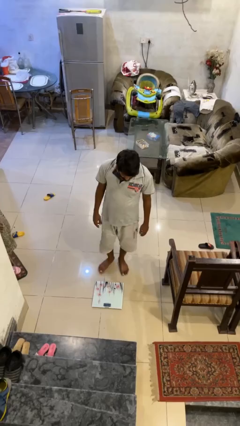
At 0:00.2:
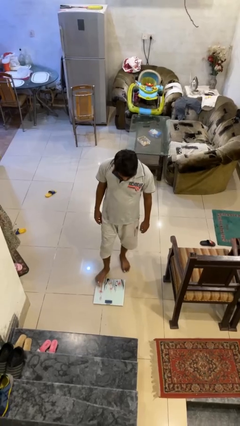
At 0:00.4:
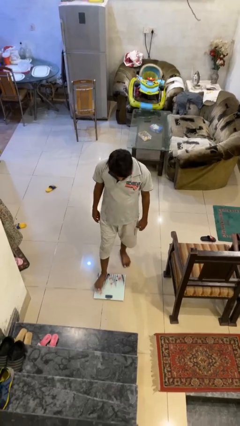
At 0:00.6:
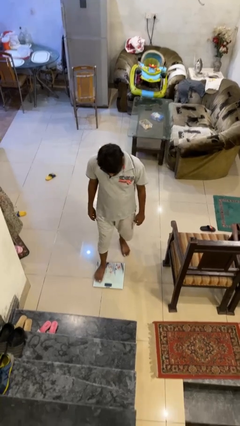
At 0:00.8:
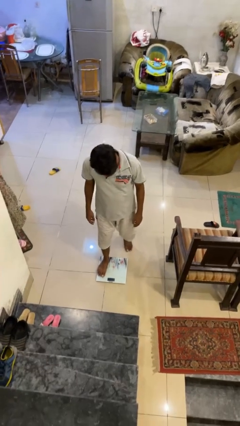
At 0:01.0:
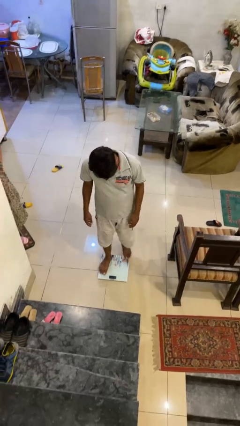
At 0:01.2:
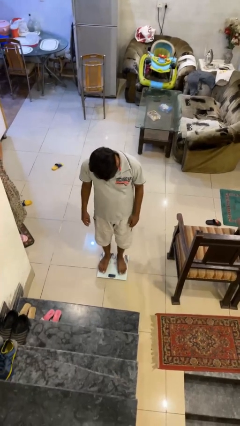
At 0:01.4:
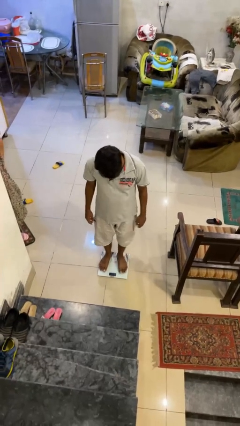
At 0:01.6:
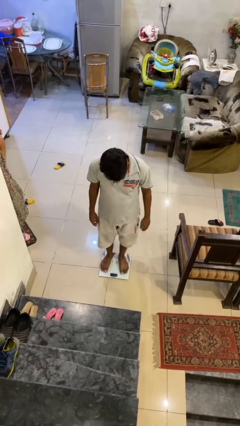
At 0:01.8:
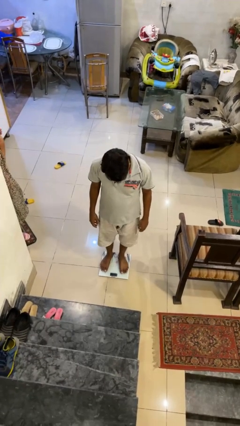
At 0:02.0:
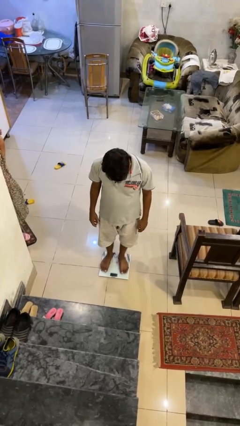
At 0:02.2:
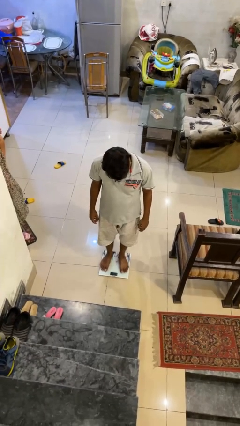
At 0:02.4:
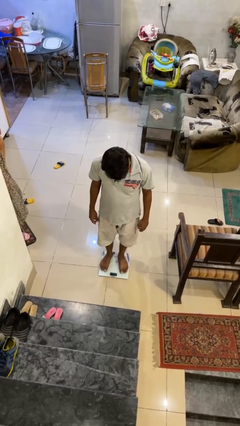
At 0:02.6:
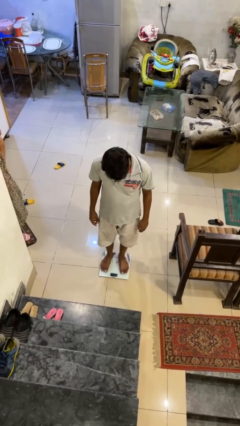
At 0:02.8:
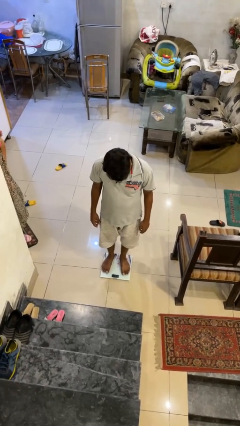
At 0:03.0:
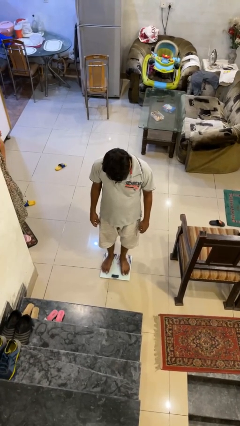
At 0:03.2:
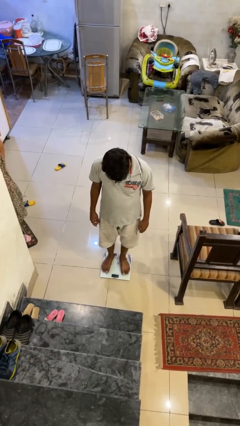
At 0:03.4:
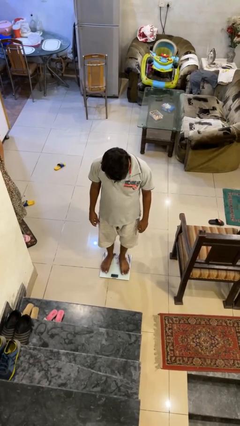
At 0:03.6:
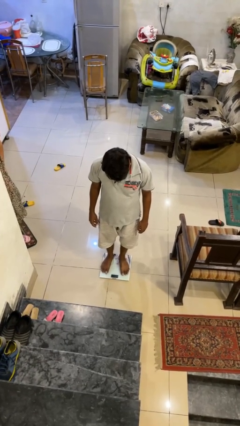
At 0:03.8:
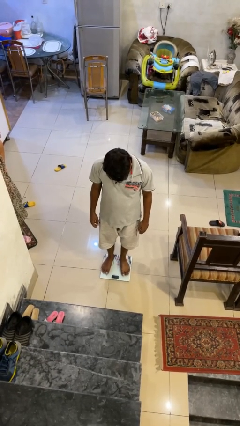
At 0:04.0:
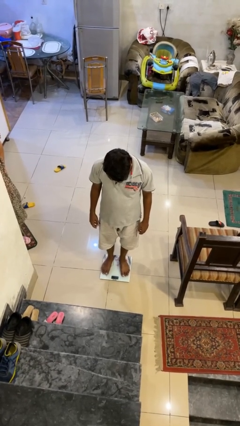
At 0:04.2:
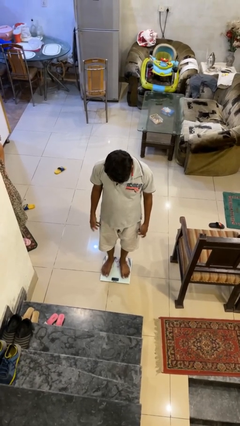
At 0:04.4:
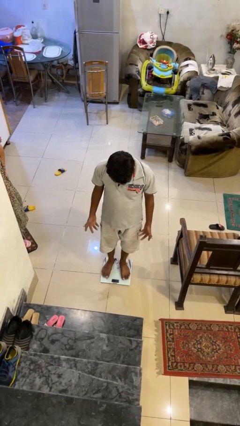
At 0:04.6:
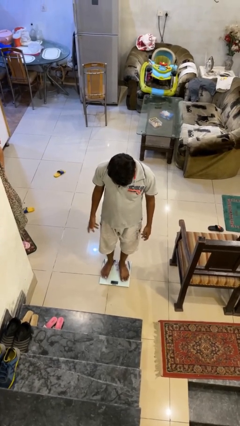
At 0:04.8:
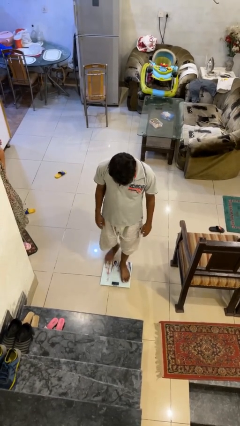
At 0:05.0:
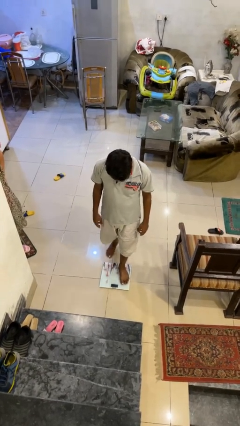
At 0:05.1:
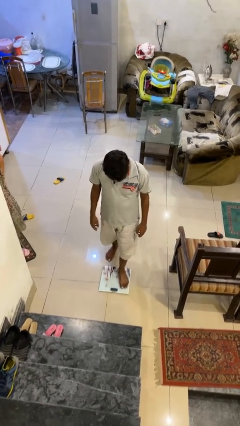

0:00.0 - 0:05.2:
person uses bodyweight scale

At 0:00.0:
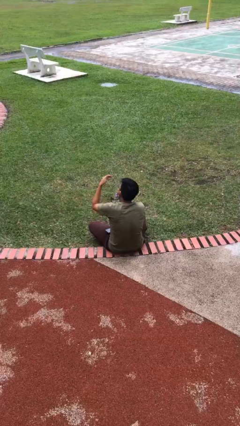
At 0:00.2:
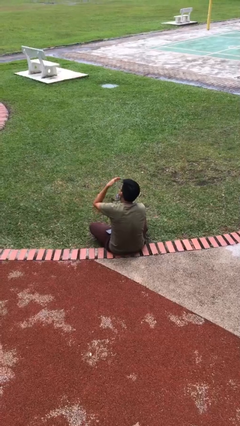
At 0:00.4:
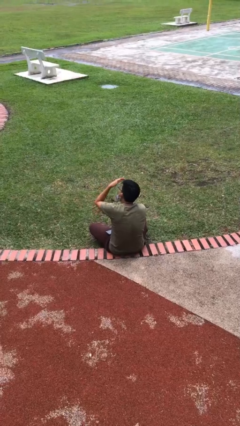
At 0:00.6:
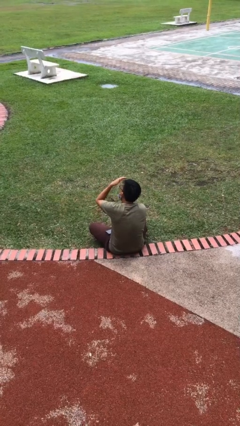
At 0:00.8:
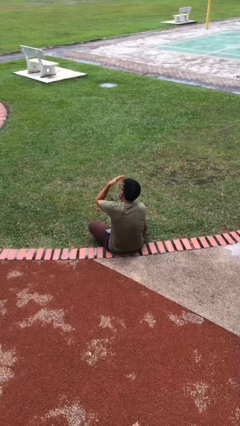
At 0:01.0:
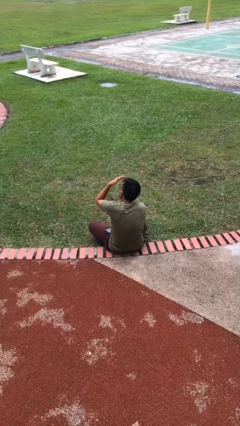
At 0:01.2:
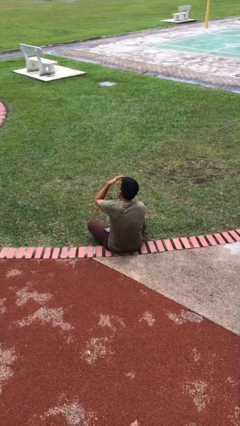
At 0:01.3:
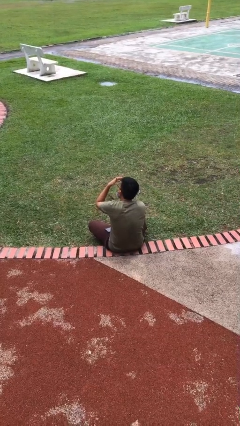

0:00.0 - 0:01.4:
person shades eyes

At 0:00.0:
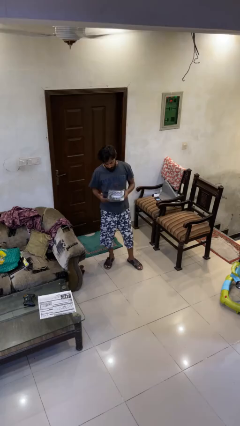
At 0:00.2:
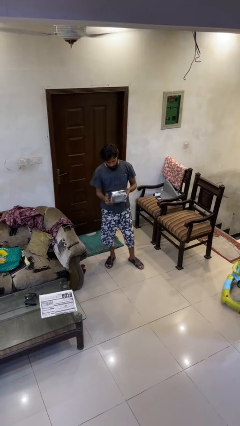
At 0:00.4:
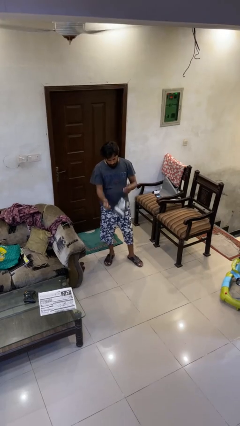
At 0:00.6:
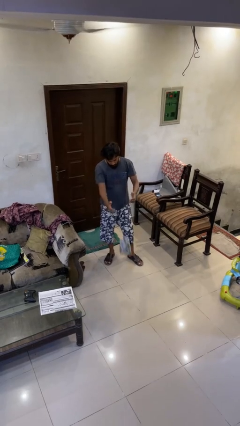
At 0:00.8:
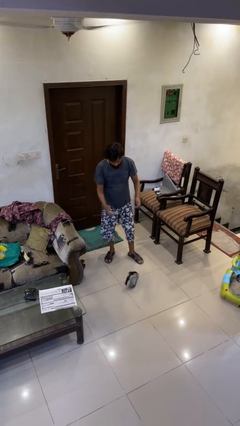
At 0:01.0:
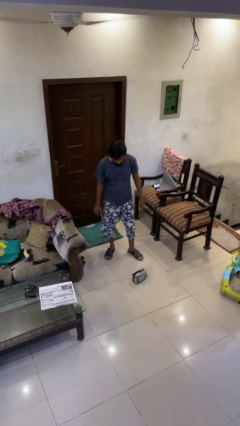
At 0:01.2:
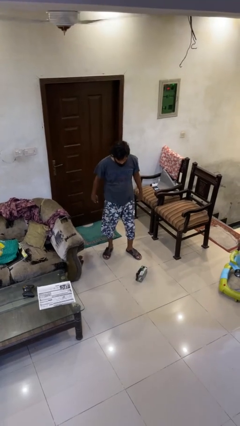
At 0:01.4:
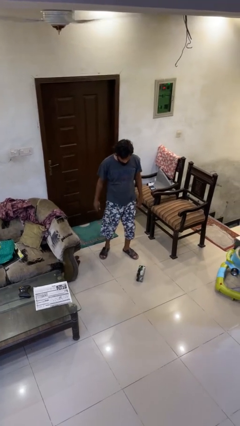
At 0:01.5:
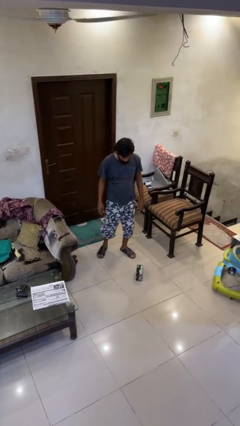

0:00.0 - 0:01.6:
person drops object

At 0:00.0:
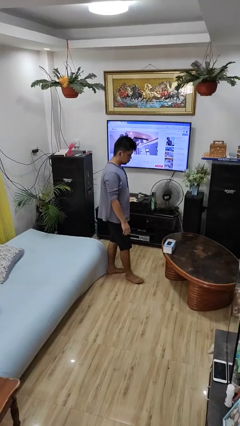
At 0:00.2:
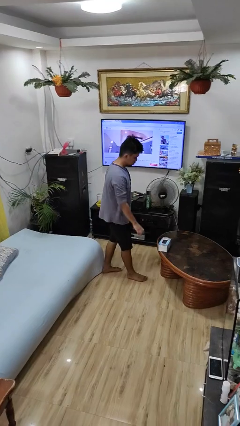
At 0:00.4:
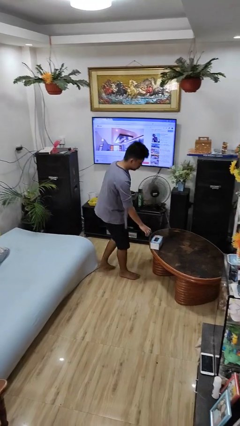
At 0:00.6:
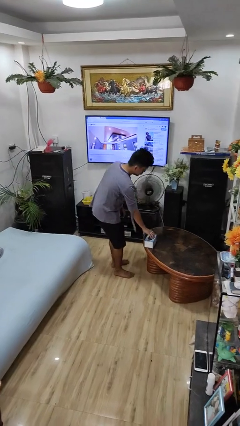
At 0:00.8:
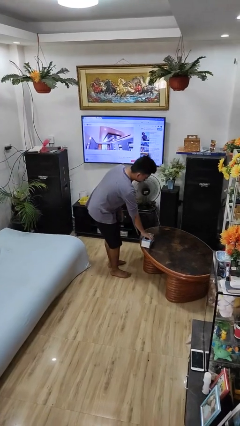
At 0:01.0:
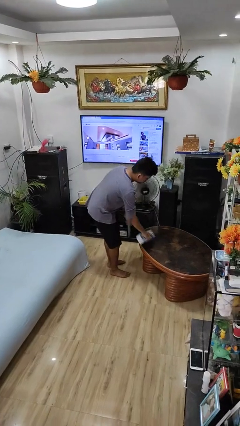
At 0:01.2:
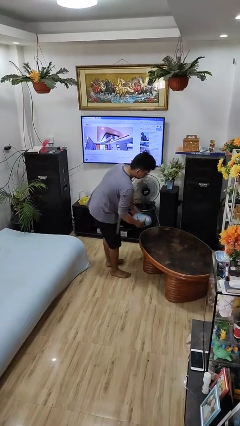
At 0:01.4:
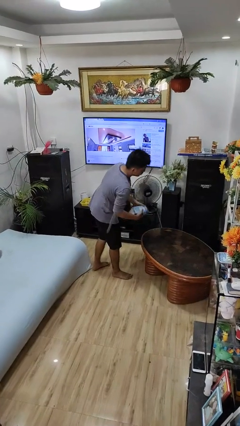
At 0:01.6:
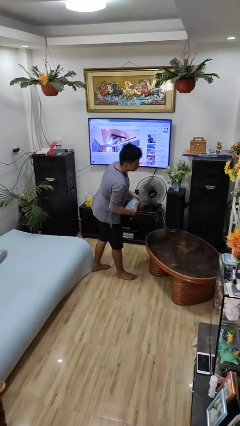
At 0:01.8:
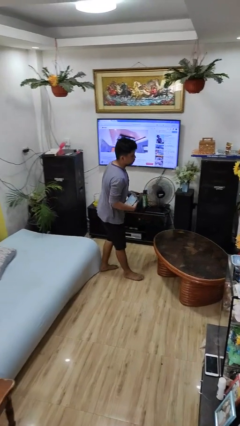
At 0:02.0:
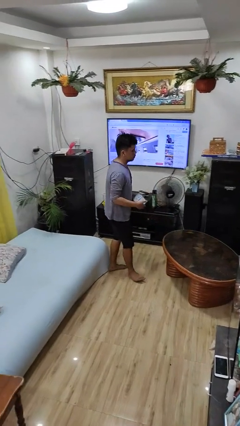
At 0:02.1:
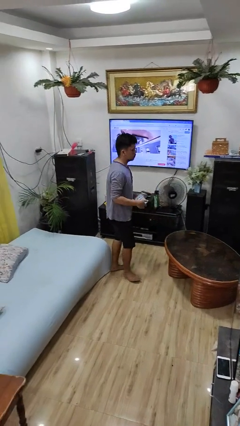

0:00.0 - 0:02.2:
person picks up object from table

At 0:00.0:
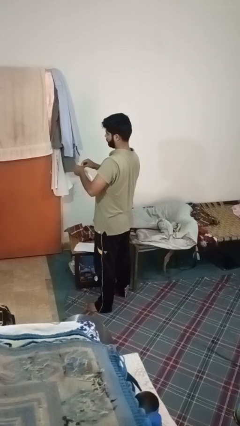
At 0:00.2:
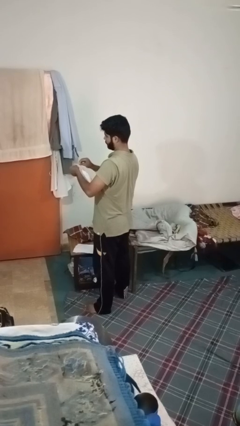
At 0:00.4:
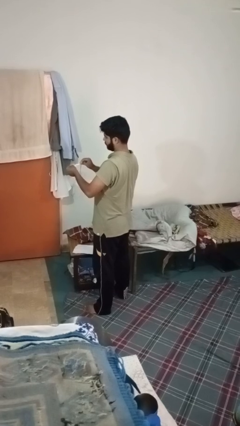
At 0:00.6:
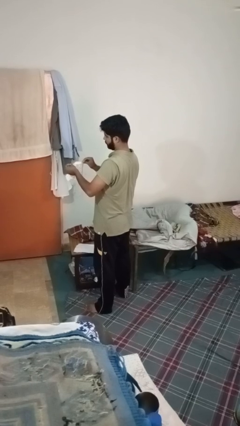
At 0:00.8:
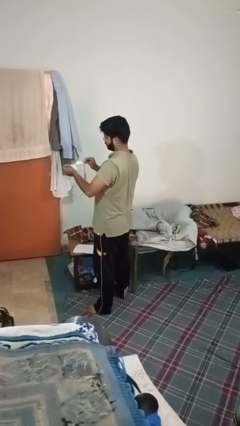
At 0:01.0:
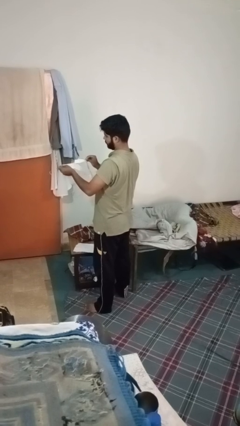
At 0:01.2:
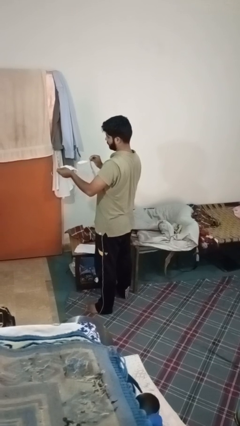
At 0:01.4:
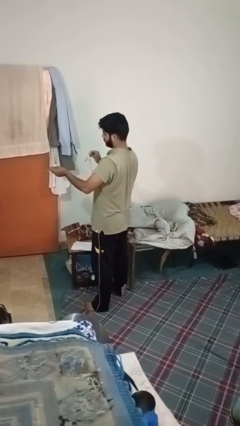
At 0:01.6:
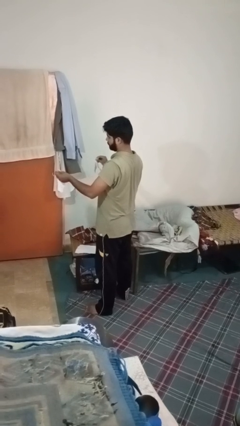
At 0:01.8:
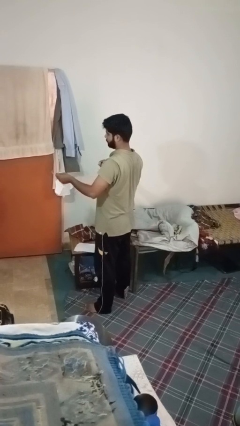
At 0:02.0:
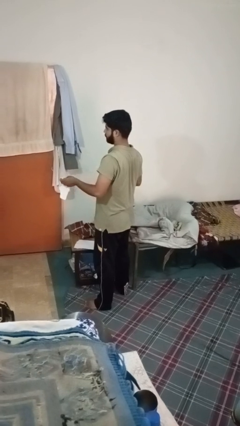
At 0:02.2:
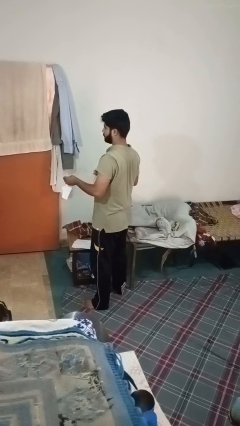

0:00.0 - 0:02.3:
person tears paper

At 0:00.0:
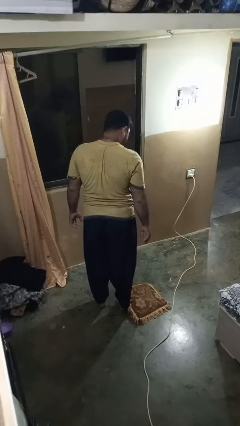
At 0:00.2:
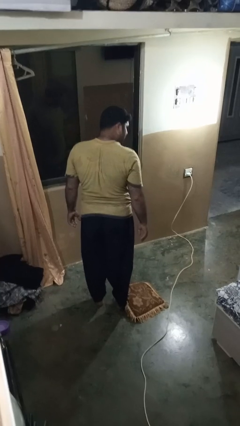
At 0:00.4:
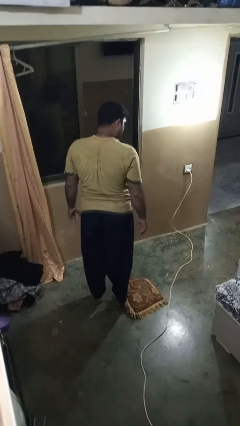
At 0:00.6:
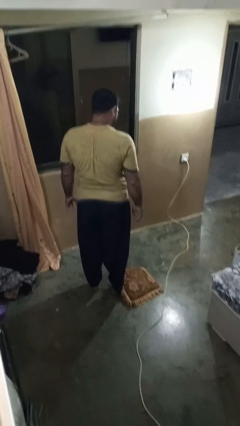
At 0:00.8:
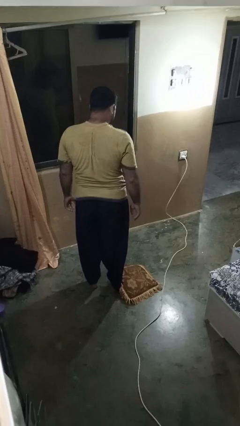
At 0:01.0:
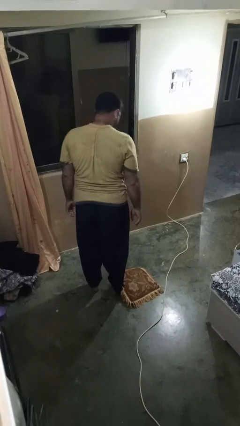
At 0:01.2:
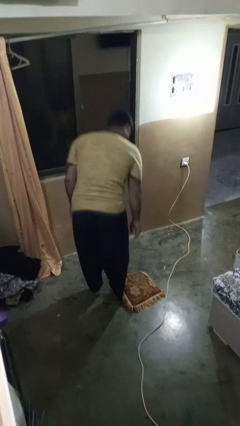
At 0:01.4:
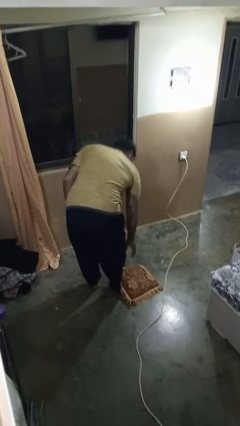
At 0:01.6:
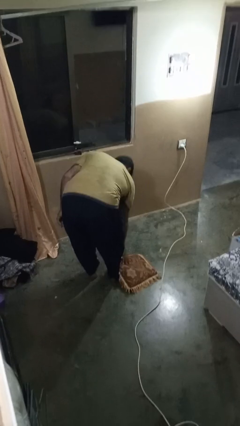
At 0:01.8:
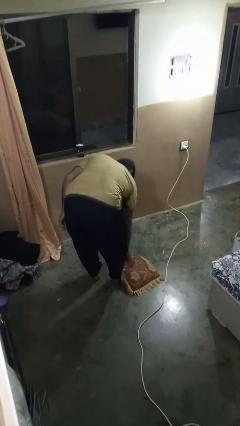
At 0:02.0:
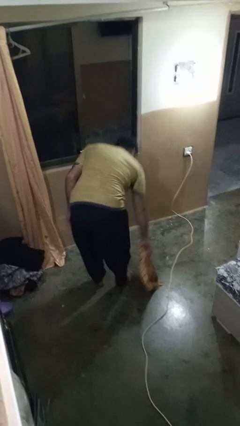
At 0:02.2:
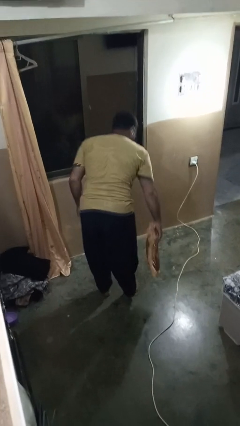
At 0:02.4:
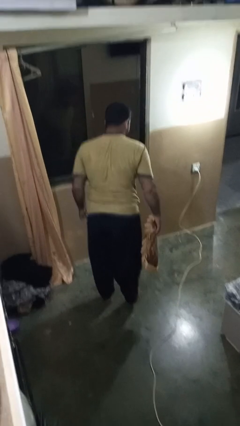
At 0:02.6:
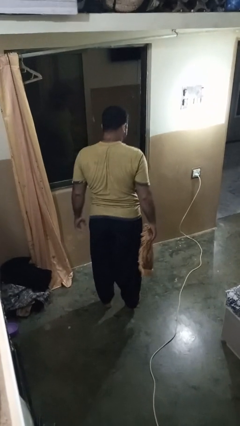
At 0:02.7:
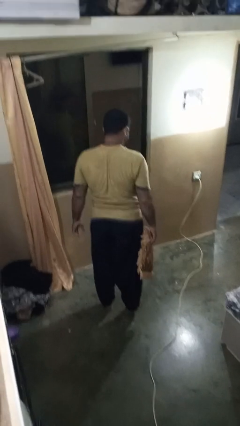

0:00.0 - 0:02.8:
person picks up object from floor

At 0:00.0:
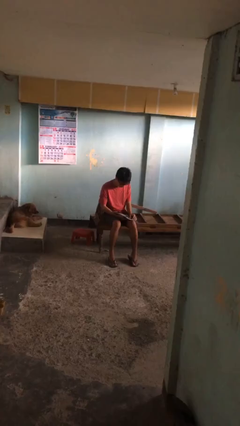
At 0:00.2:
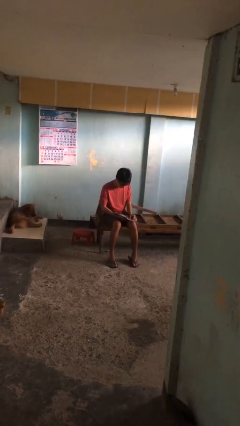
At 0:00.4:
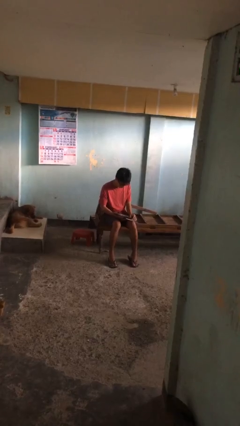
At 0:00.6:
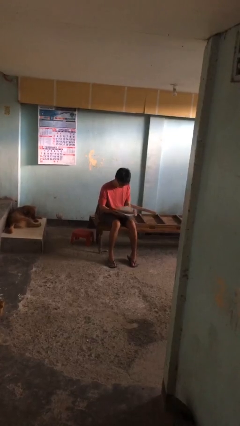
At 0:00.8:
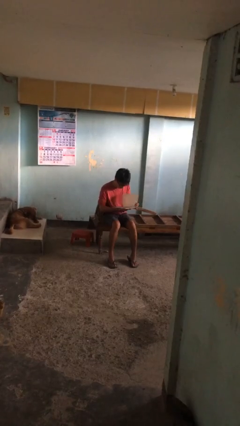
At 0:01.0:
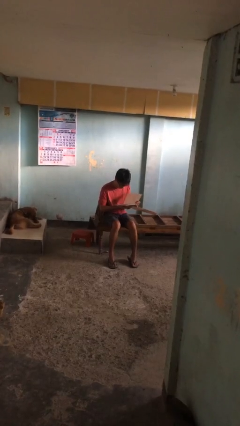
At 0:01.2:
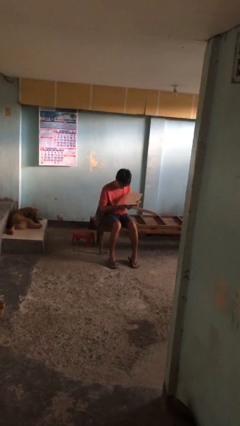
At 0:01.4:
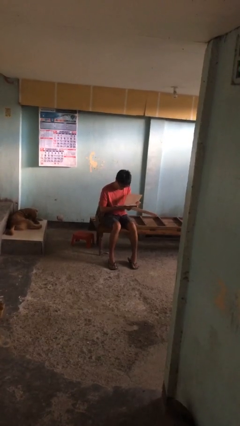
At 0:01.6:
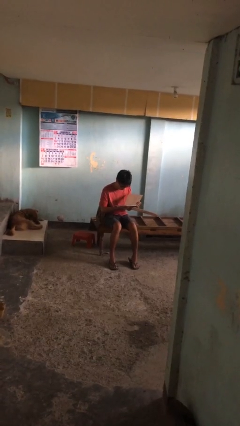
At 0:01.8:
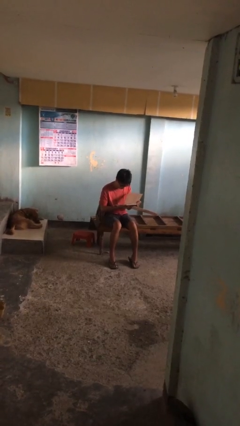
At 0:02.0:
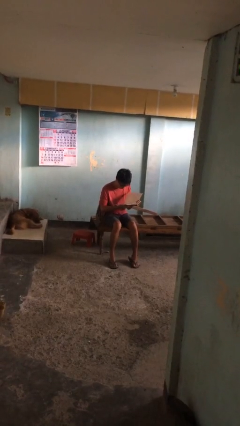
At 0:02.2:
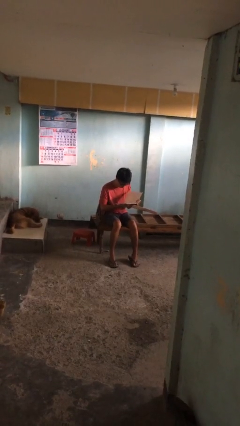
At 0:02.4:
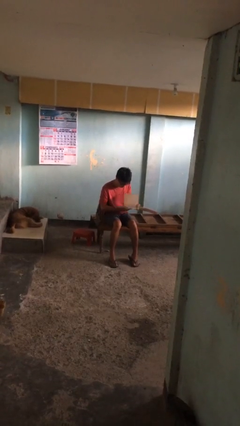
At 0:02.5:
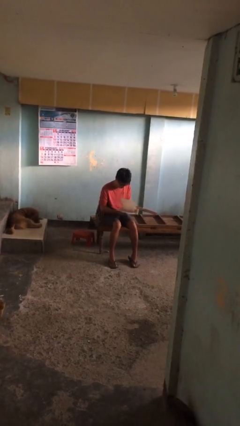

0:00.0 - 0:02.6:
person reads document
